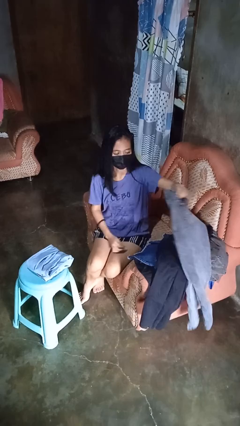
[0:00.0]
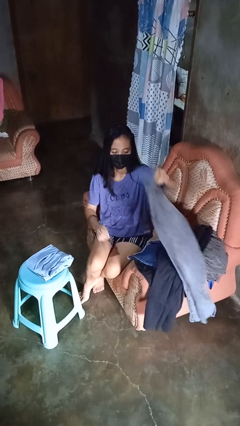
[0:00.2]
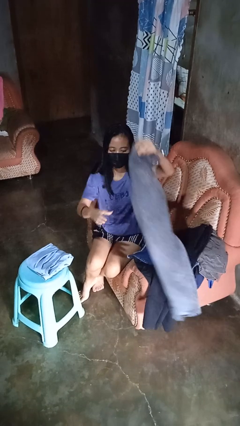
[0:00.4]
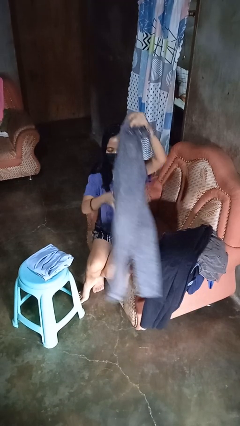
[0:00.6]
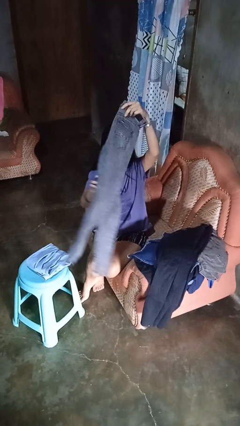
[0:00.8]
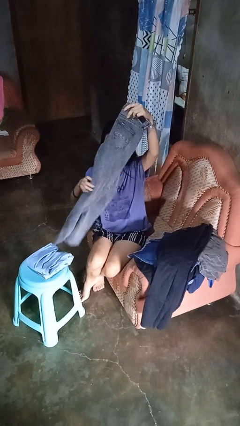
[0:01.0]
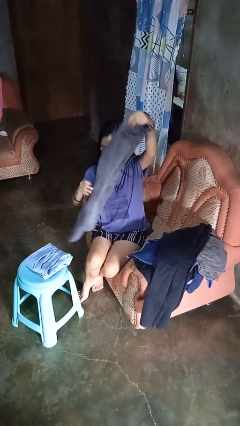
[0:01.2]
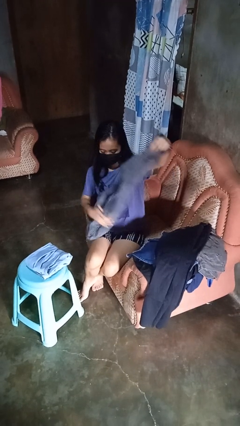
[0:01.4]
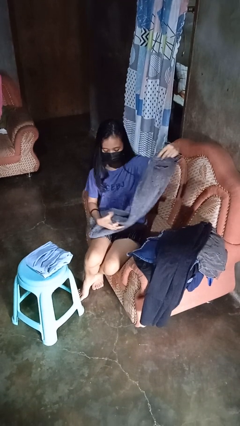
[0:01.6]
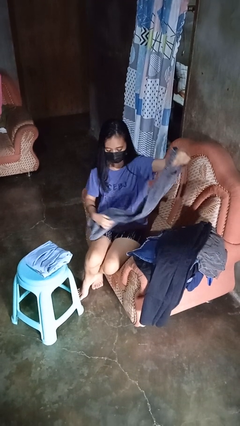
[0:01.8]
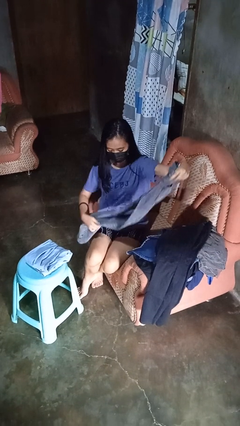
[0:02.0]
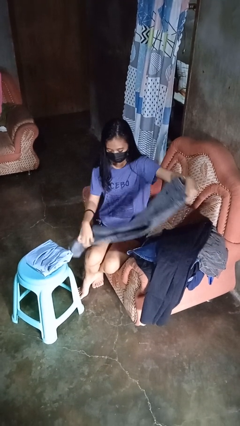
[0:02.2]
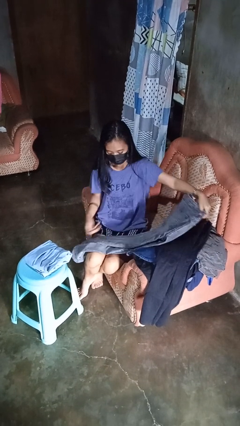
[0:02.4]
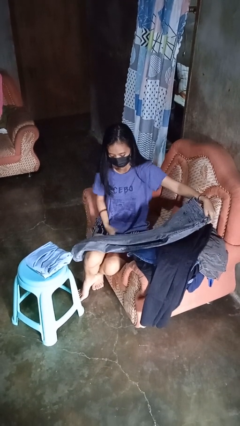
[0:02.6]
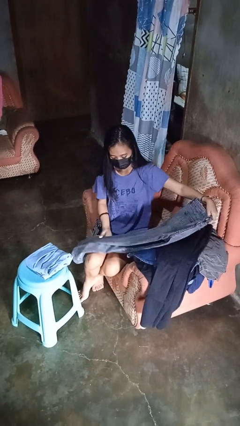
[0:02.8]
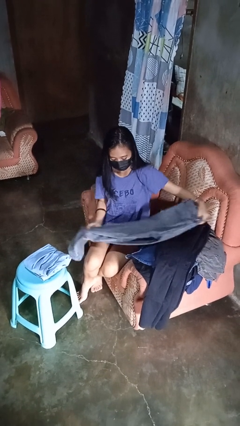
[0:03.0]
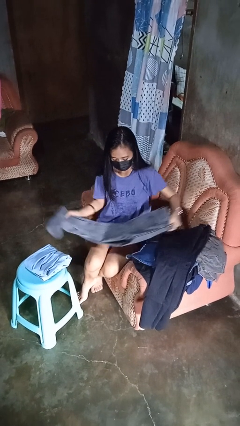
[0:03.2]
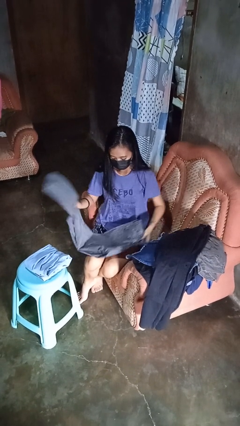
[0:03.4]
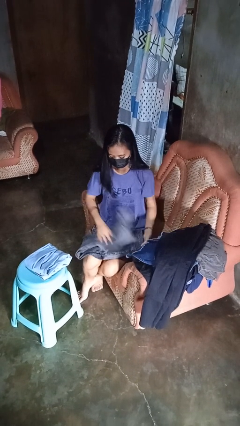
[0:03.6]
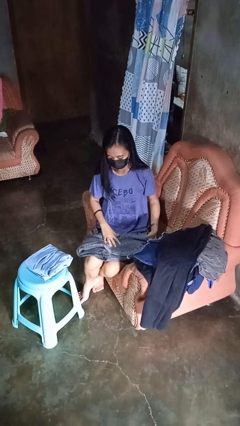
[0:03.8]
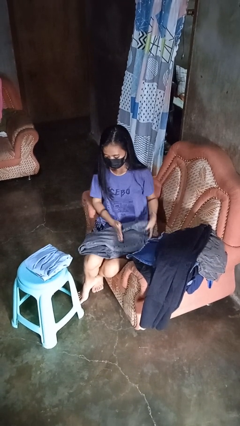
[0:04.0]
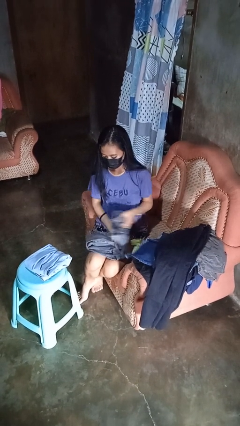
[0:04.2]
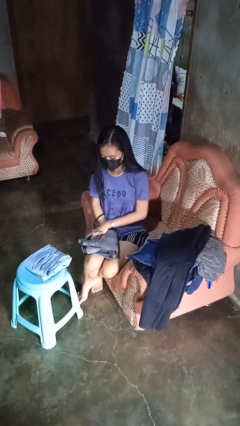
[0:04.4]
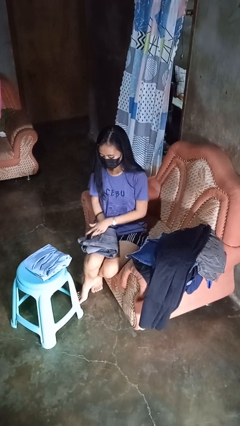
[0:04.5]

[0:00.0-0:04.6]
person folds pants

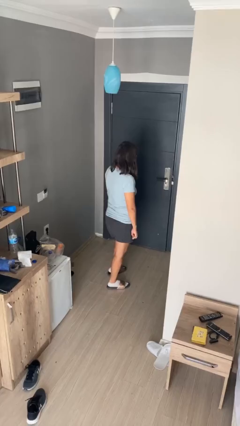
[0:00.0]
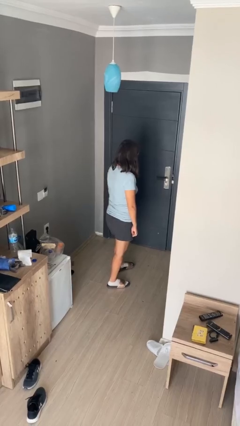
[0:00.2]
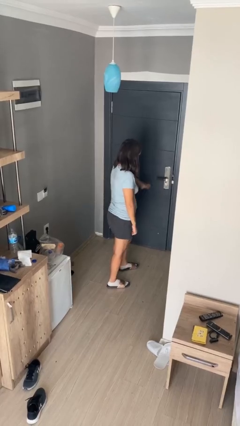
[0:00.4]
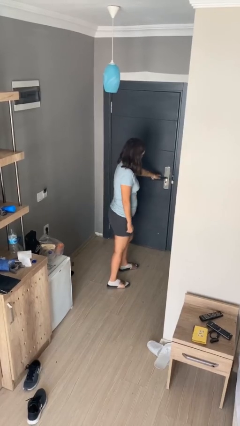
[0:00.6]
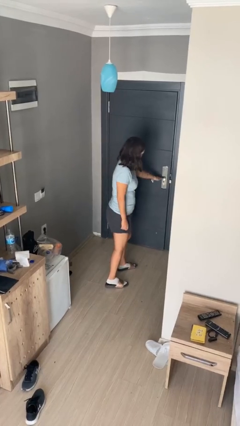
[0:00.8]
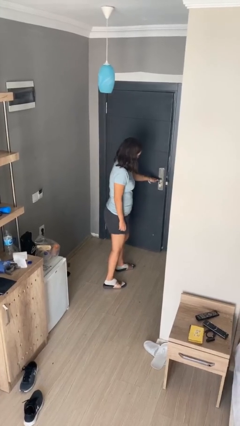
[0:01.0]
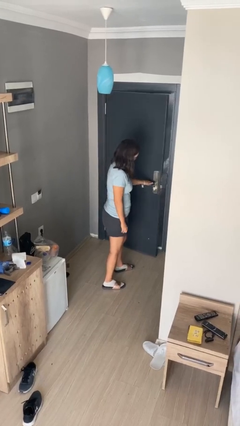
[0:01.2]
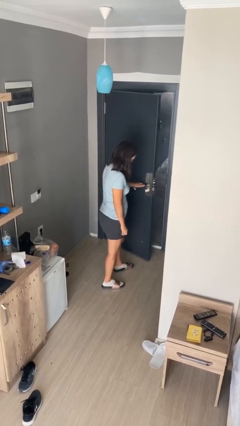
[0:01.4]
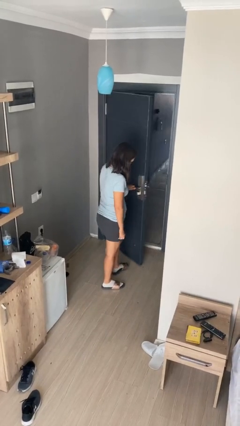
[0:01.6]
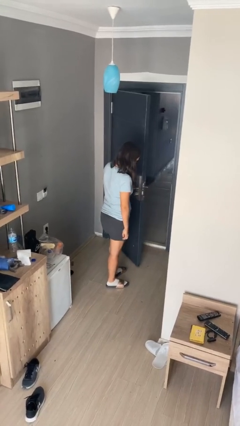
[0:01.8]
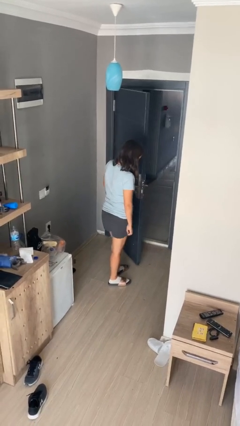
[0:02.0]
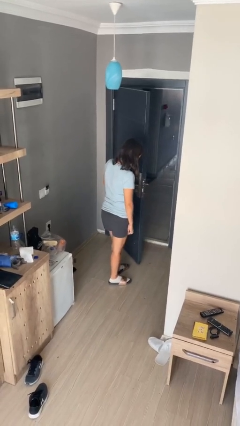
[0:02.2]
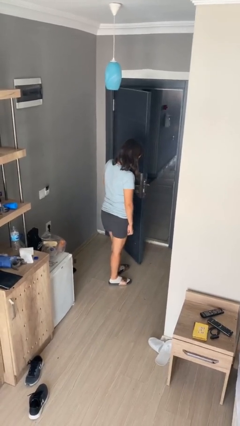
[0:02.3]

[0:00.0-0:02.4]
person opens facility door

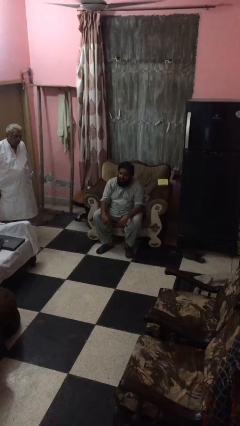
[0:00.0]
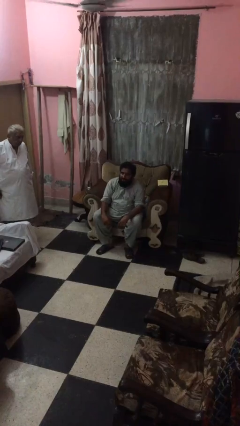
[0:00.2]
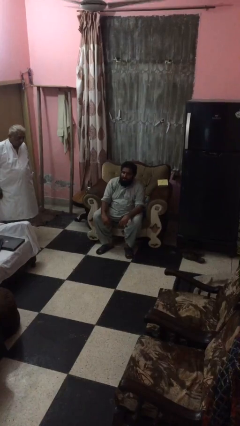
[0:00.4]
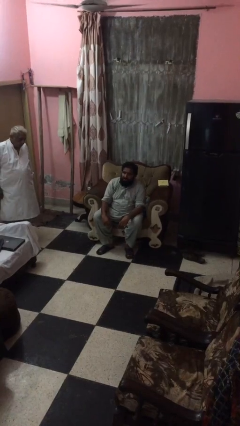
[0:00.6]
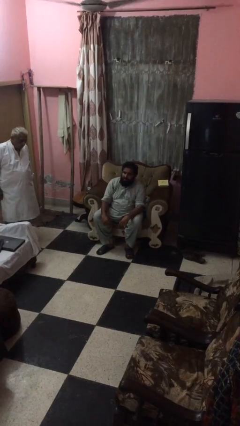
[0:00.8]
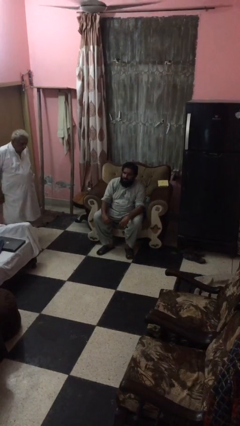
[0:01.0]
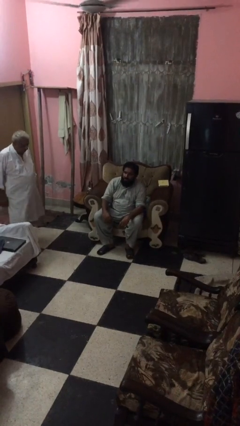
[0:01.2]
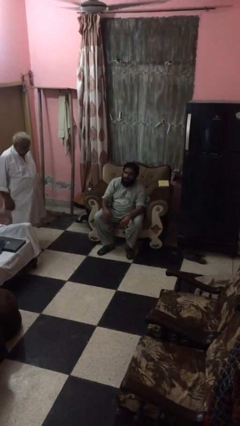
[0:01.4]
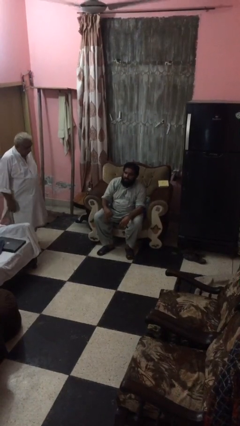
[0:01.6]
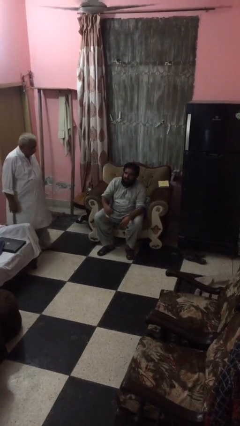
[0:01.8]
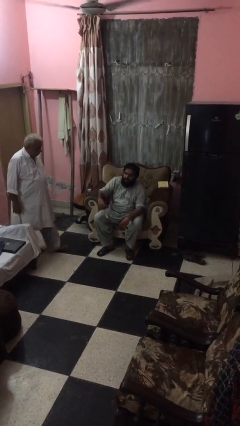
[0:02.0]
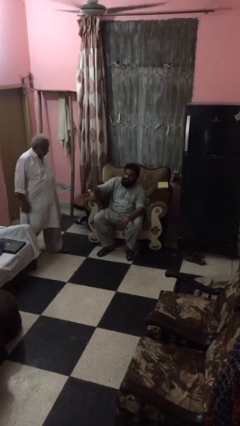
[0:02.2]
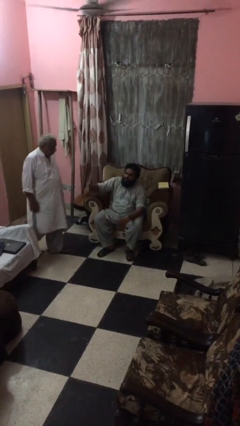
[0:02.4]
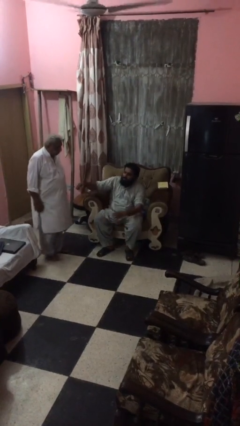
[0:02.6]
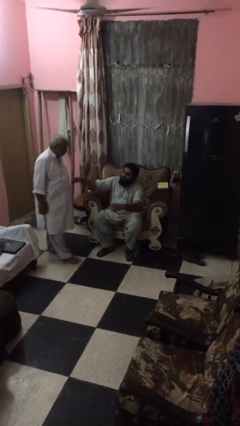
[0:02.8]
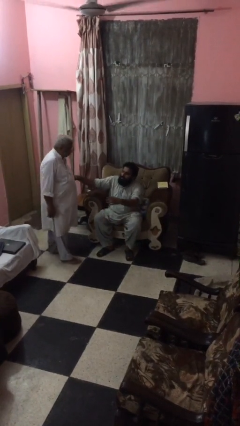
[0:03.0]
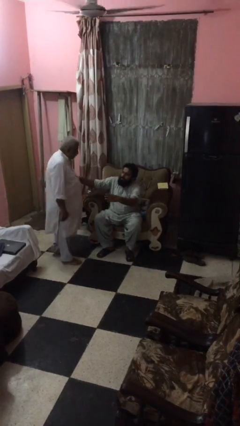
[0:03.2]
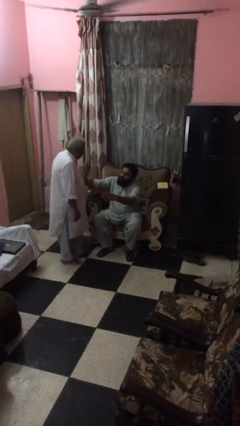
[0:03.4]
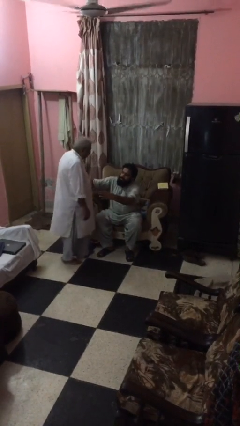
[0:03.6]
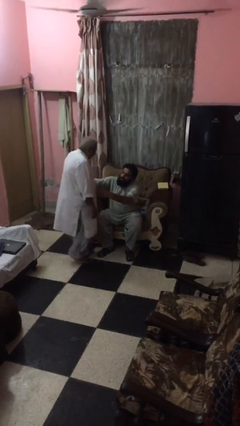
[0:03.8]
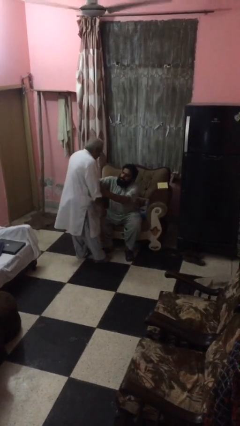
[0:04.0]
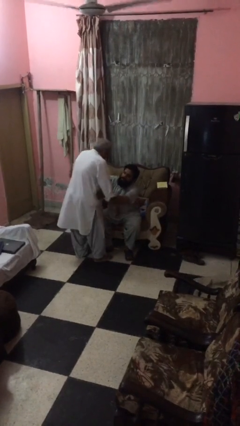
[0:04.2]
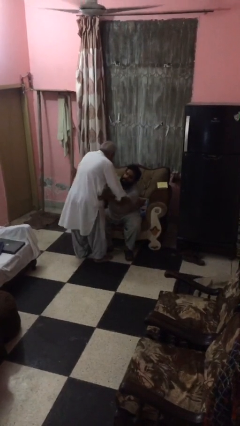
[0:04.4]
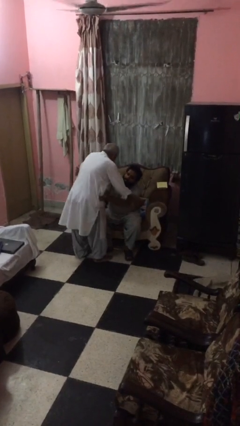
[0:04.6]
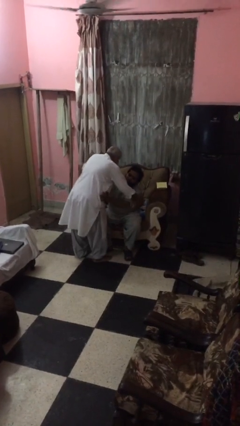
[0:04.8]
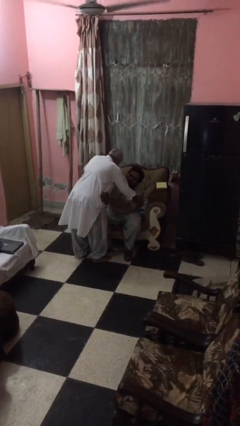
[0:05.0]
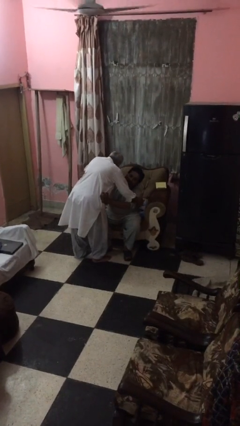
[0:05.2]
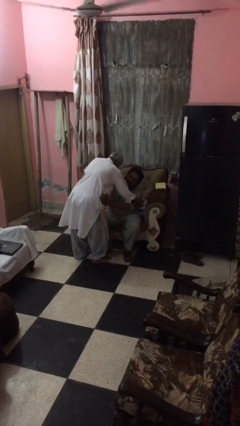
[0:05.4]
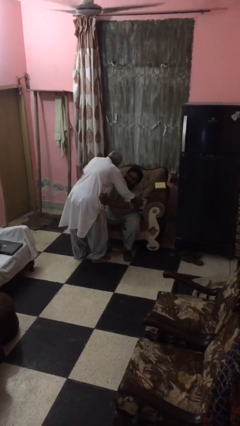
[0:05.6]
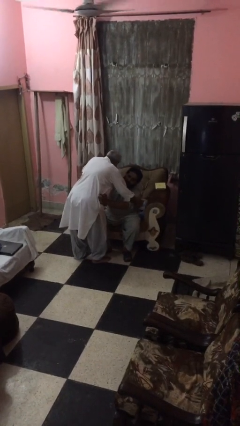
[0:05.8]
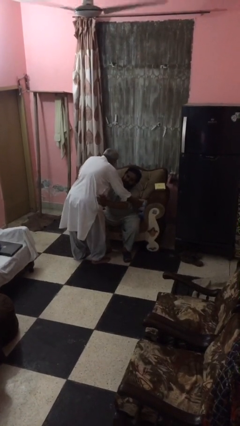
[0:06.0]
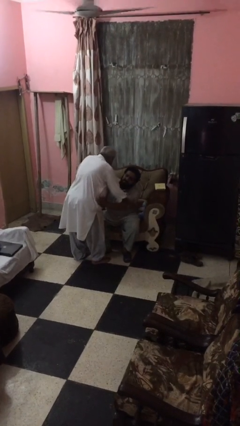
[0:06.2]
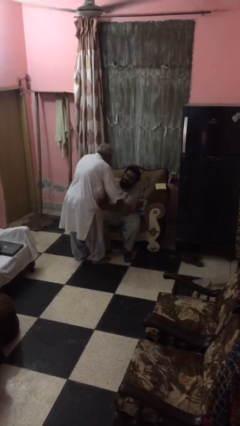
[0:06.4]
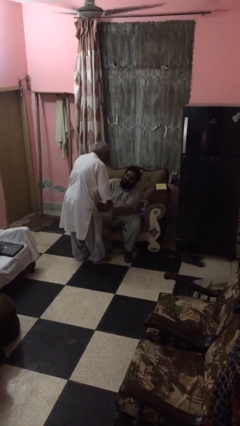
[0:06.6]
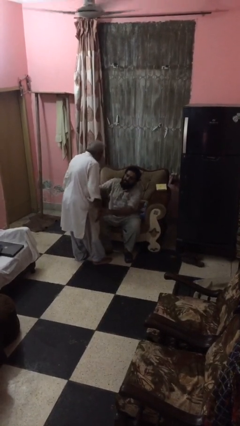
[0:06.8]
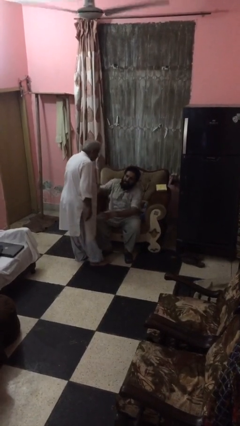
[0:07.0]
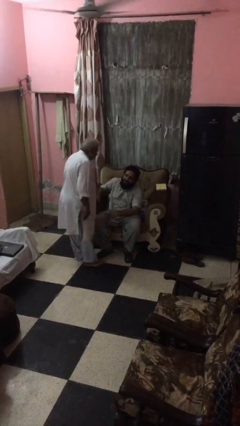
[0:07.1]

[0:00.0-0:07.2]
person embraces person

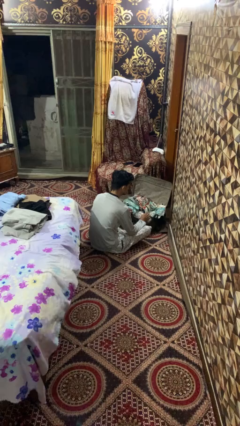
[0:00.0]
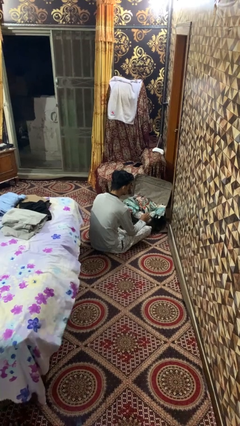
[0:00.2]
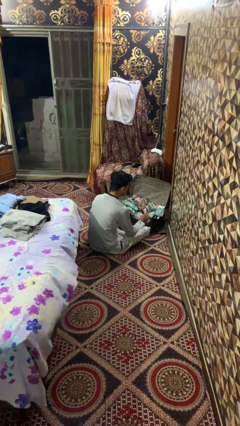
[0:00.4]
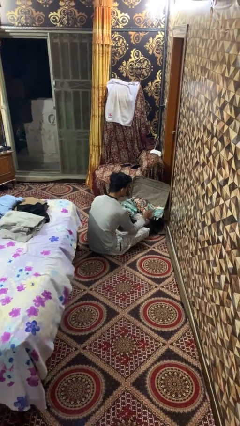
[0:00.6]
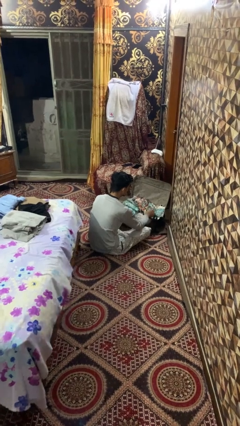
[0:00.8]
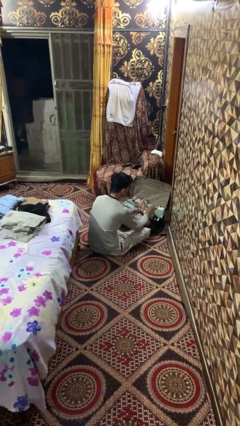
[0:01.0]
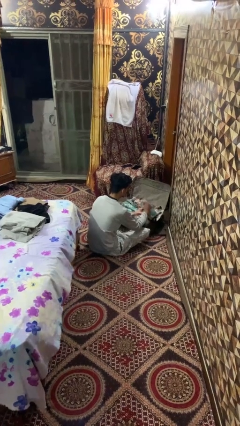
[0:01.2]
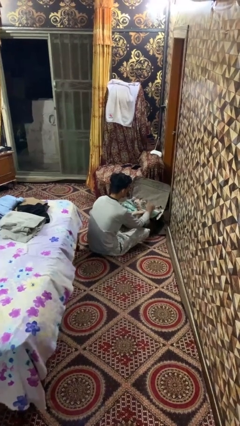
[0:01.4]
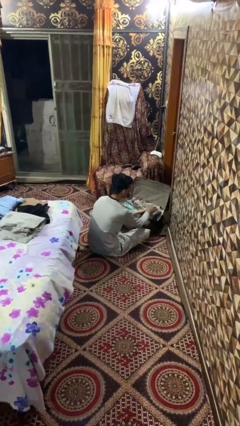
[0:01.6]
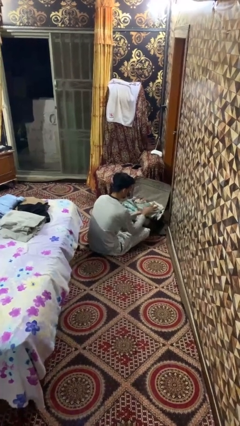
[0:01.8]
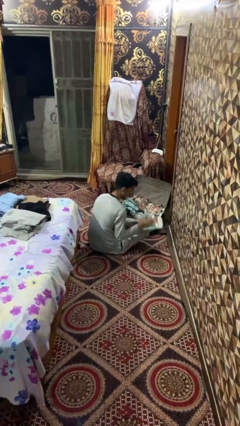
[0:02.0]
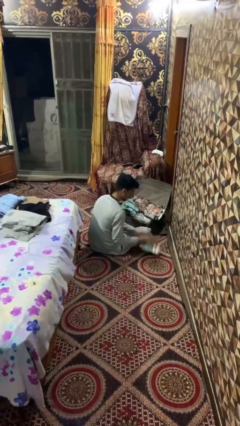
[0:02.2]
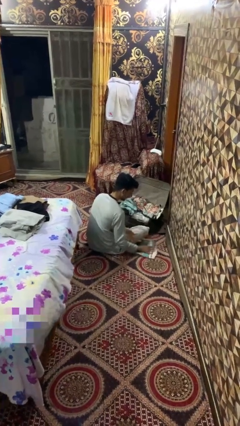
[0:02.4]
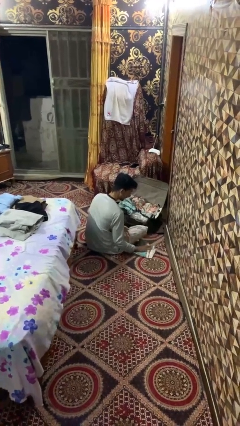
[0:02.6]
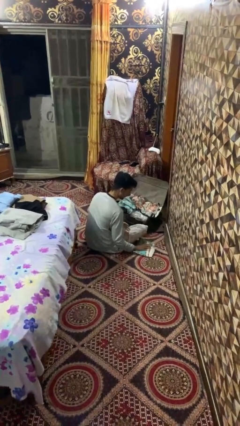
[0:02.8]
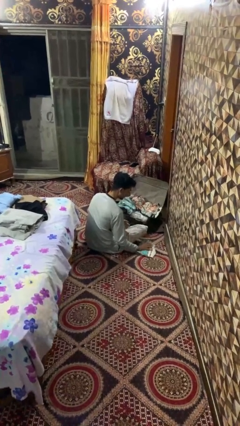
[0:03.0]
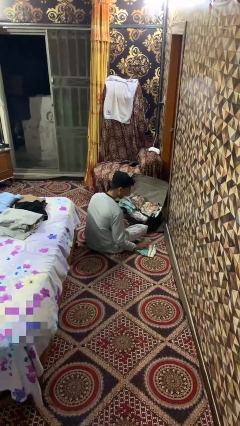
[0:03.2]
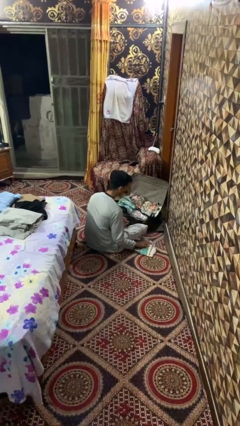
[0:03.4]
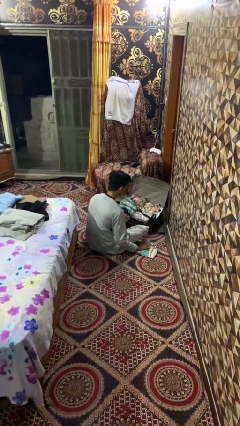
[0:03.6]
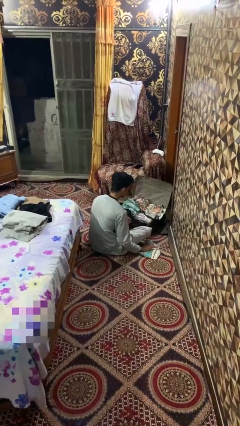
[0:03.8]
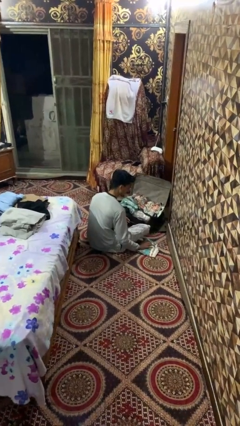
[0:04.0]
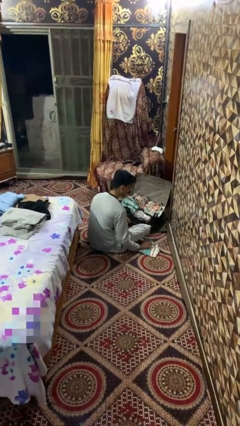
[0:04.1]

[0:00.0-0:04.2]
person unloads clothes from suitcase
